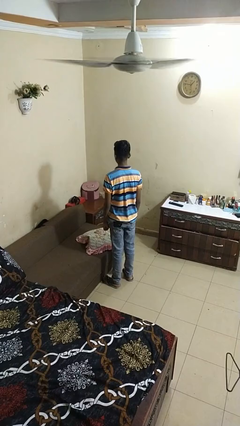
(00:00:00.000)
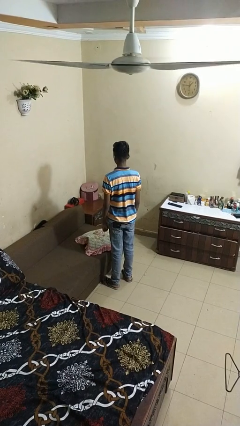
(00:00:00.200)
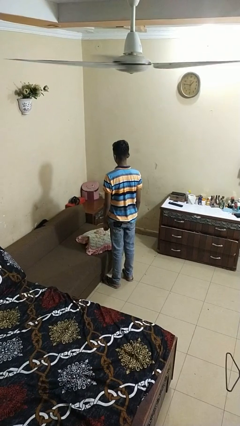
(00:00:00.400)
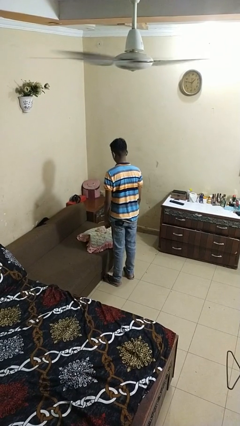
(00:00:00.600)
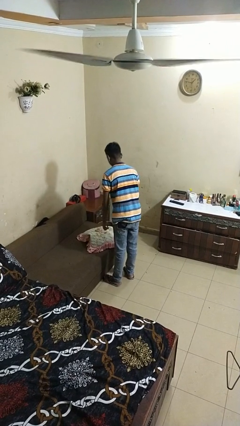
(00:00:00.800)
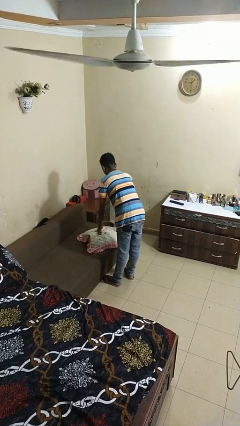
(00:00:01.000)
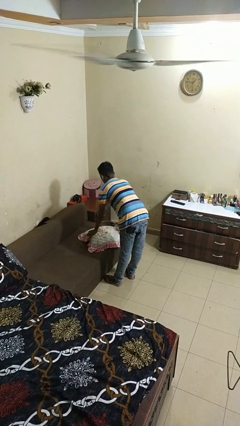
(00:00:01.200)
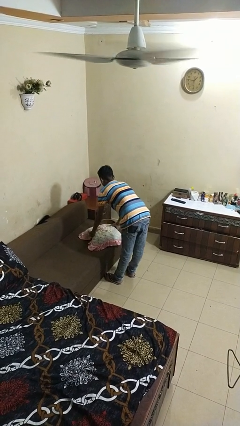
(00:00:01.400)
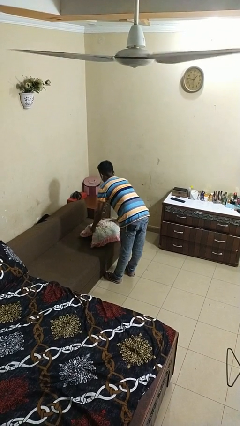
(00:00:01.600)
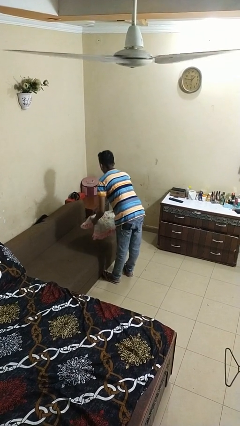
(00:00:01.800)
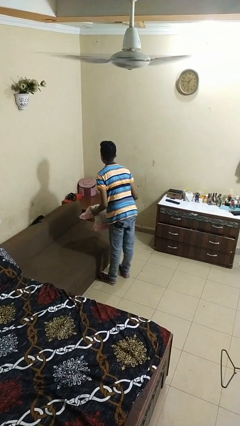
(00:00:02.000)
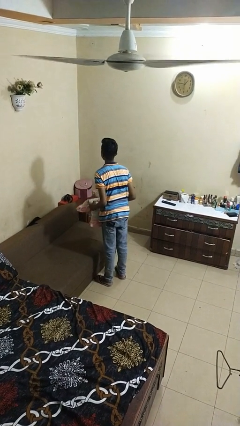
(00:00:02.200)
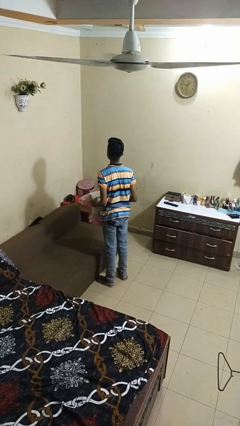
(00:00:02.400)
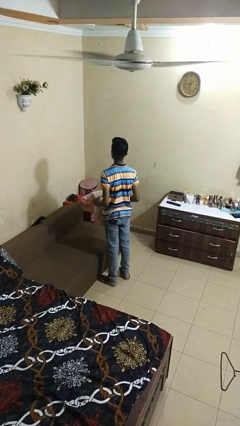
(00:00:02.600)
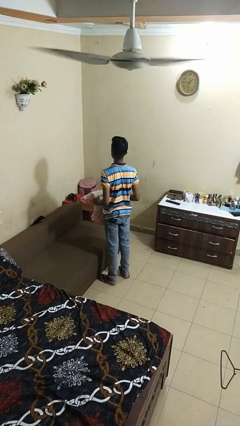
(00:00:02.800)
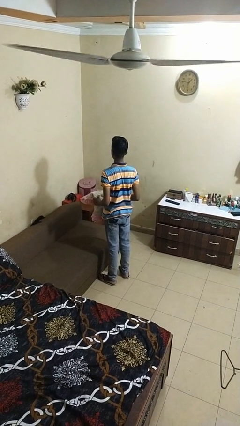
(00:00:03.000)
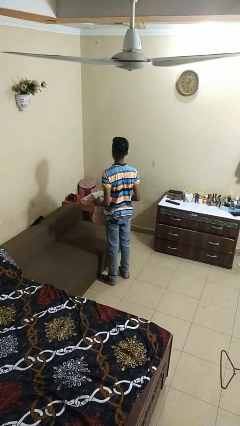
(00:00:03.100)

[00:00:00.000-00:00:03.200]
person picks up object from couch

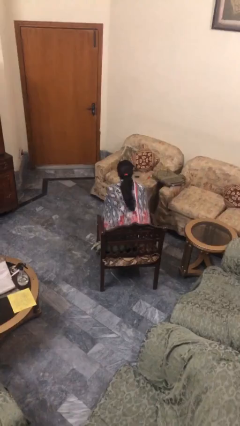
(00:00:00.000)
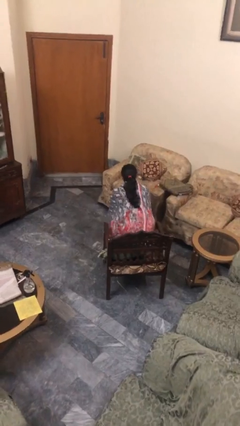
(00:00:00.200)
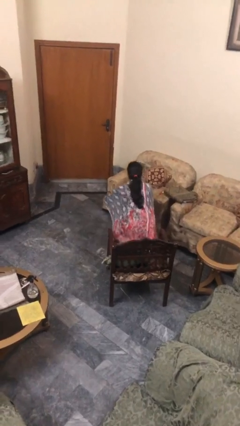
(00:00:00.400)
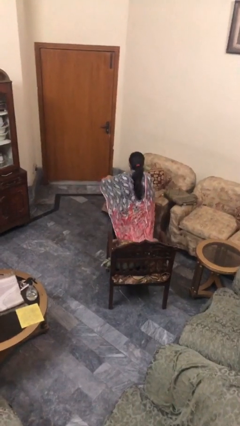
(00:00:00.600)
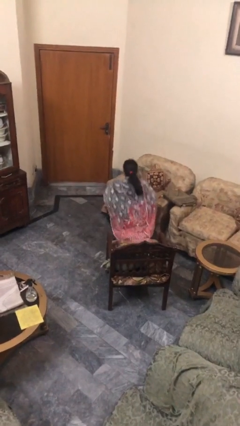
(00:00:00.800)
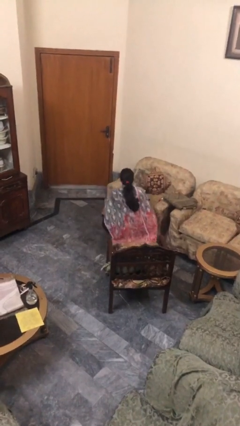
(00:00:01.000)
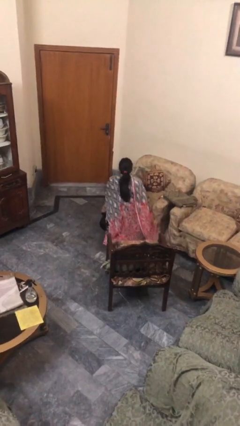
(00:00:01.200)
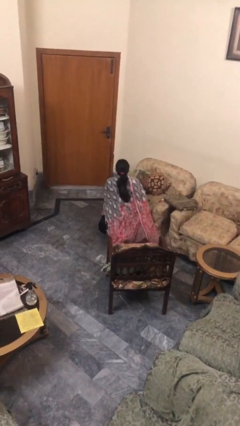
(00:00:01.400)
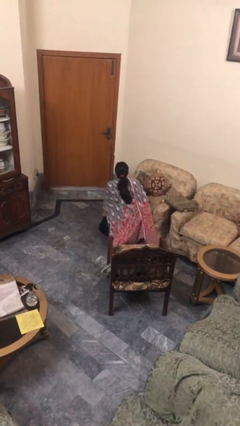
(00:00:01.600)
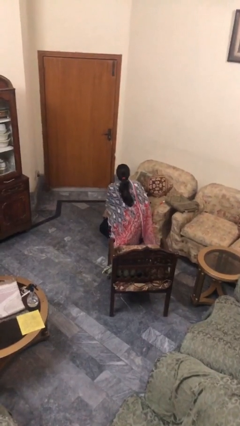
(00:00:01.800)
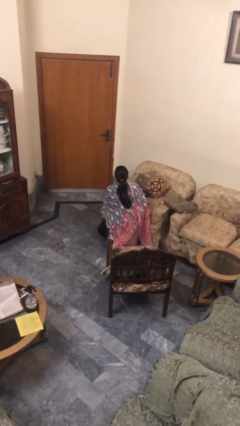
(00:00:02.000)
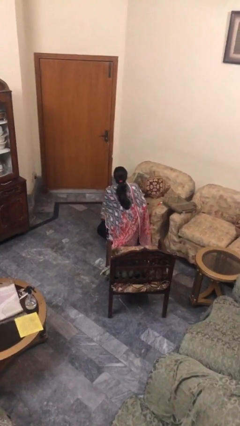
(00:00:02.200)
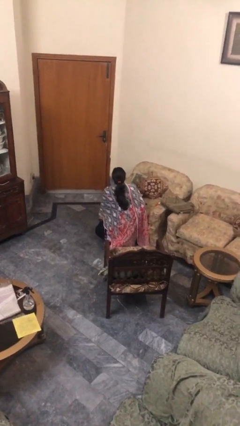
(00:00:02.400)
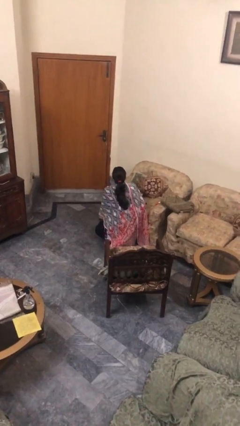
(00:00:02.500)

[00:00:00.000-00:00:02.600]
person falls from chair

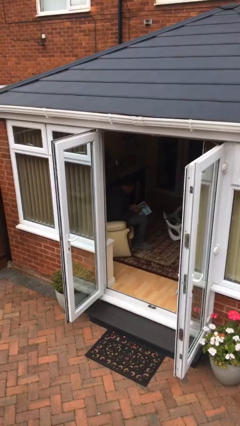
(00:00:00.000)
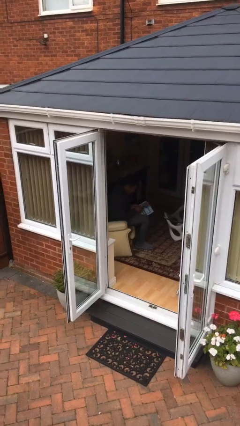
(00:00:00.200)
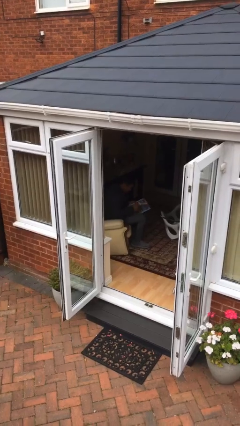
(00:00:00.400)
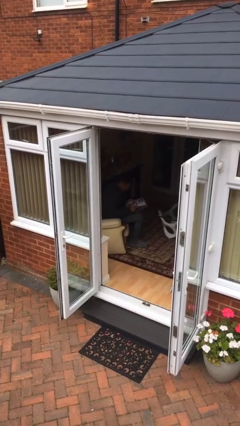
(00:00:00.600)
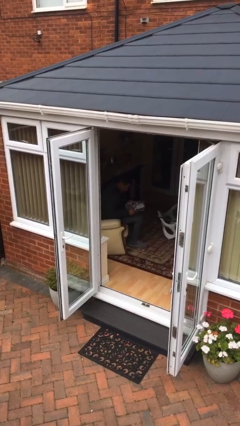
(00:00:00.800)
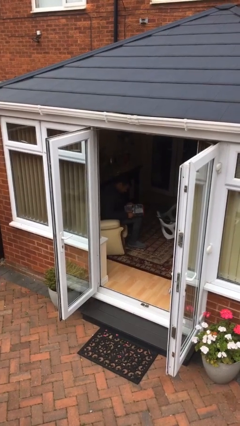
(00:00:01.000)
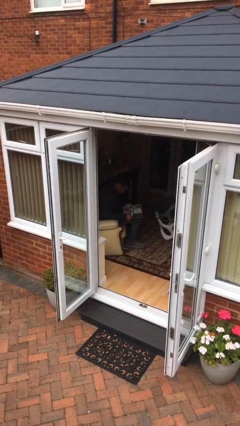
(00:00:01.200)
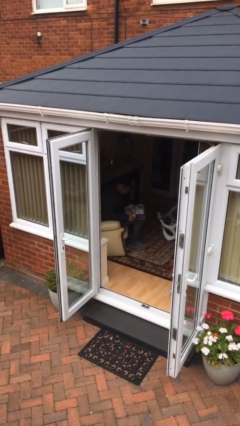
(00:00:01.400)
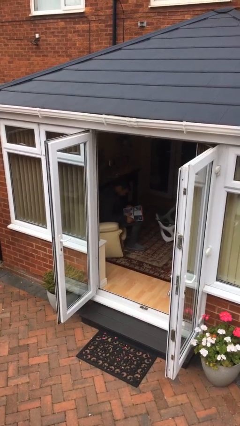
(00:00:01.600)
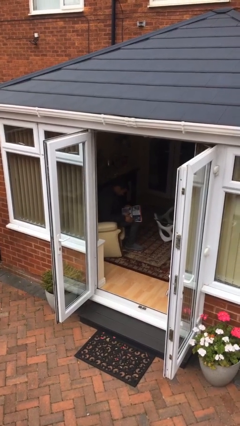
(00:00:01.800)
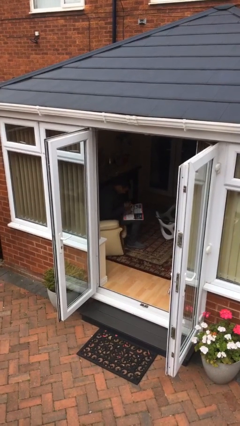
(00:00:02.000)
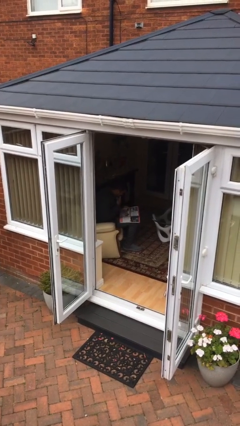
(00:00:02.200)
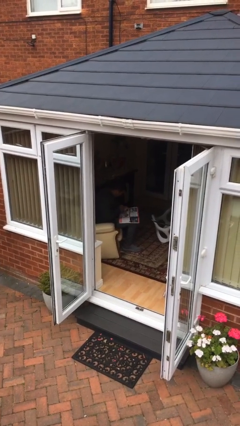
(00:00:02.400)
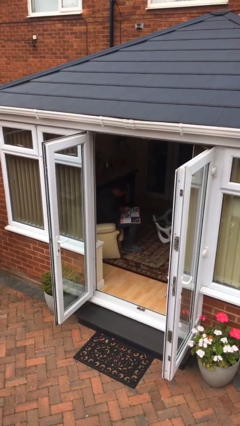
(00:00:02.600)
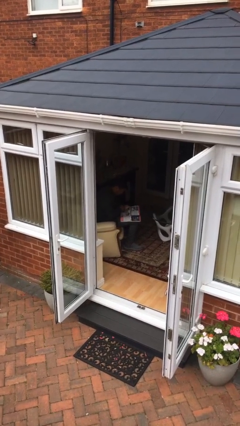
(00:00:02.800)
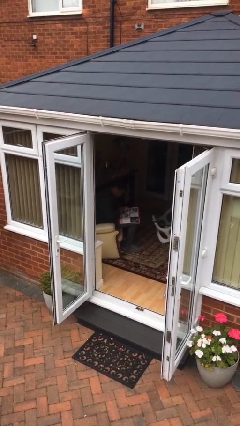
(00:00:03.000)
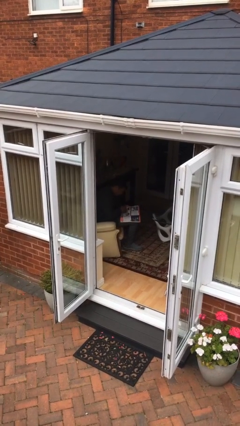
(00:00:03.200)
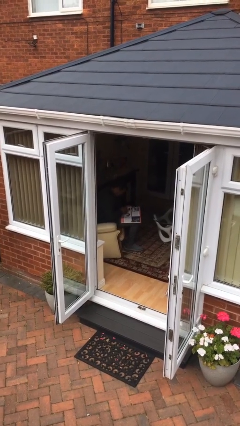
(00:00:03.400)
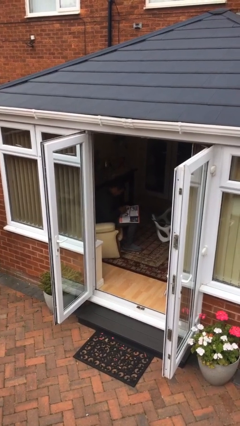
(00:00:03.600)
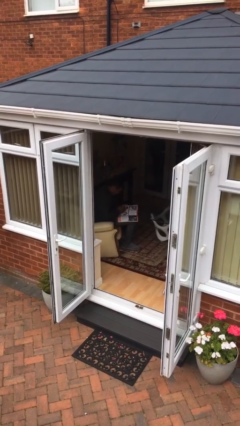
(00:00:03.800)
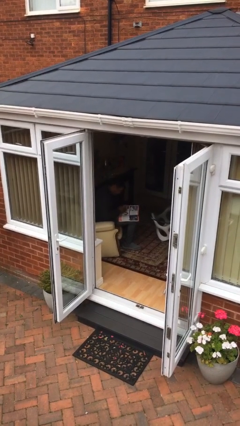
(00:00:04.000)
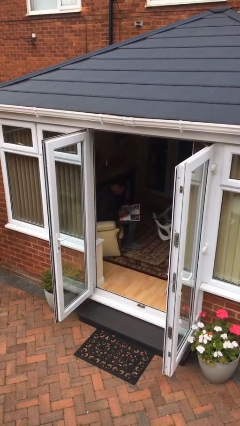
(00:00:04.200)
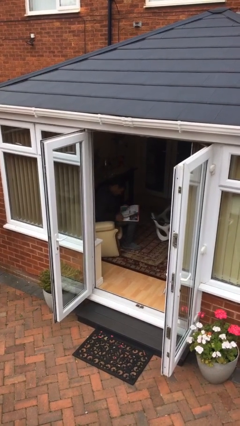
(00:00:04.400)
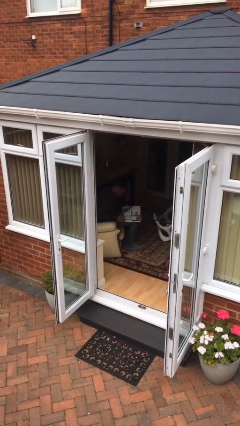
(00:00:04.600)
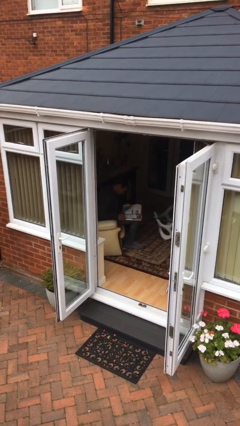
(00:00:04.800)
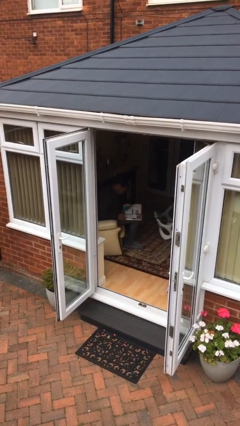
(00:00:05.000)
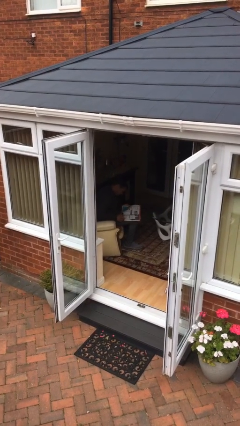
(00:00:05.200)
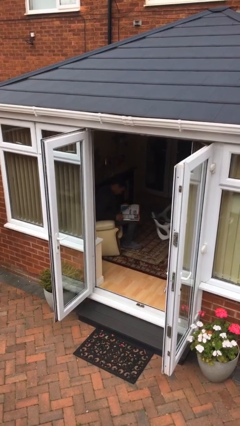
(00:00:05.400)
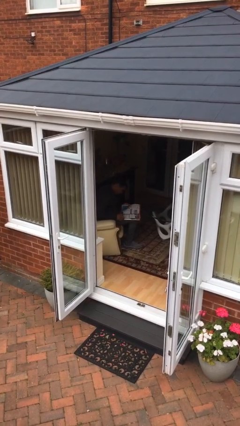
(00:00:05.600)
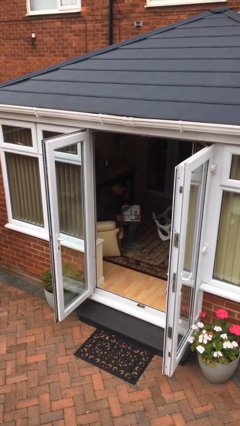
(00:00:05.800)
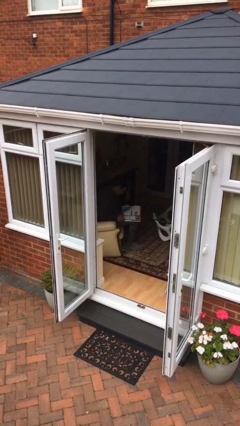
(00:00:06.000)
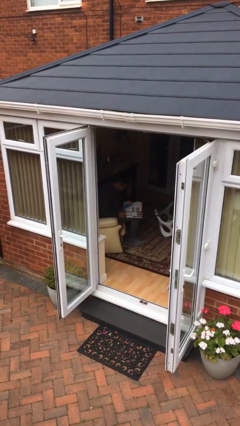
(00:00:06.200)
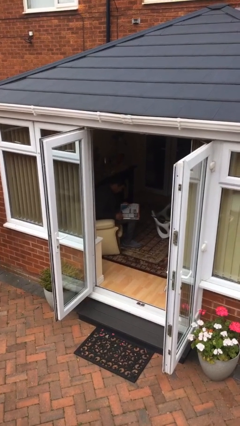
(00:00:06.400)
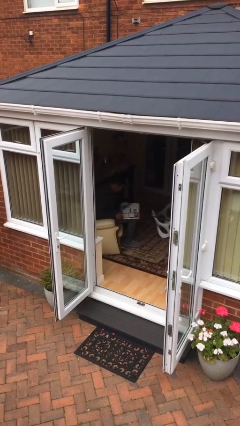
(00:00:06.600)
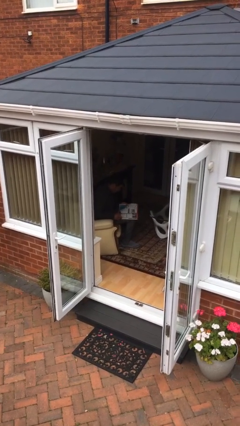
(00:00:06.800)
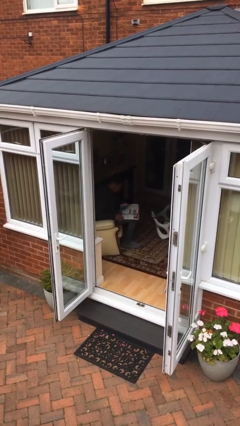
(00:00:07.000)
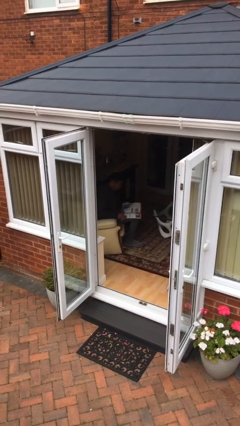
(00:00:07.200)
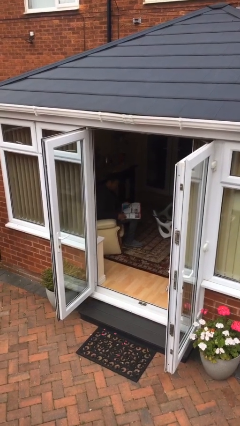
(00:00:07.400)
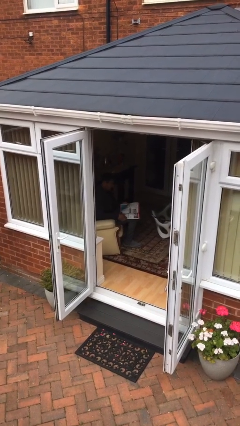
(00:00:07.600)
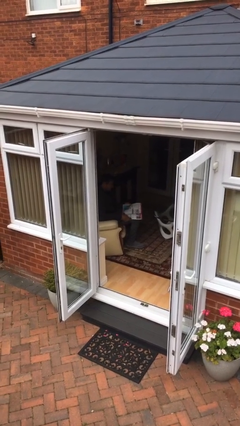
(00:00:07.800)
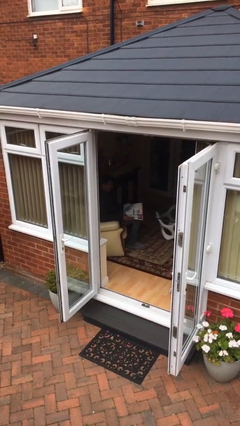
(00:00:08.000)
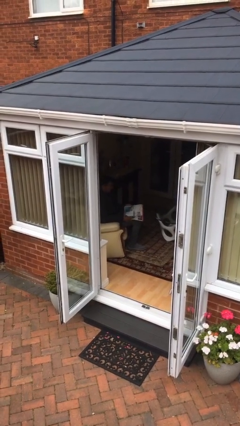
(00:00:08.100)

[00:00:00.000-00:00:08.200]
person reads document

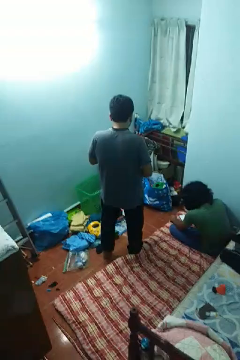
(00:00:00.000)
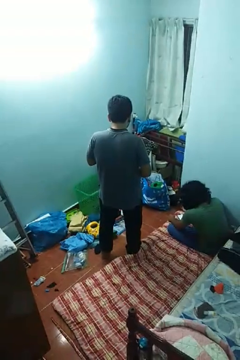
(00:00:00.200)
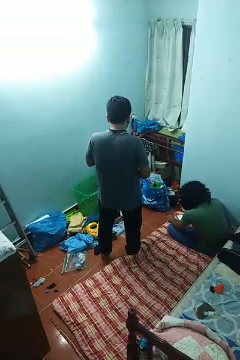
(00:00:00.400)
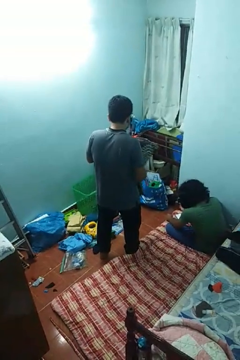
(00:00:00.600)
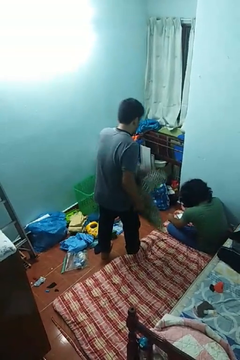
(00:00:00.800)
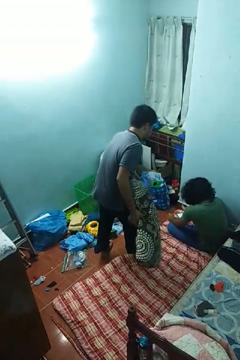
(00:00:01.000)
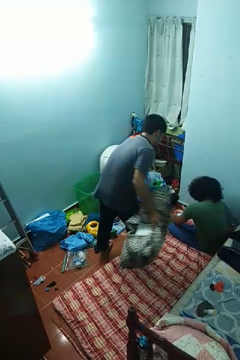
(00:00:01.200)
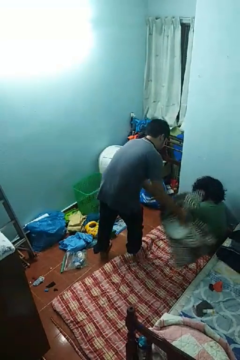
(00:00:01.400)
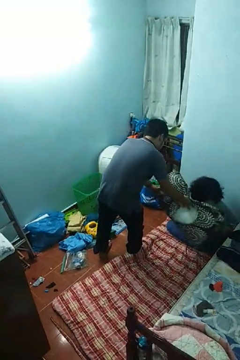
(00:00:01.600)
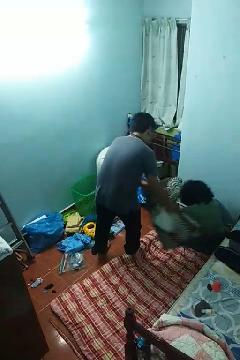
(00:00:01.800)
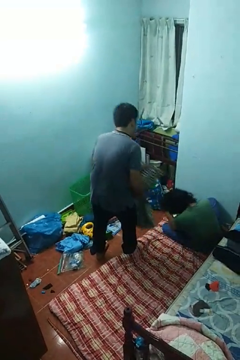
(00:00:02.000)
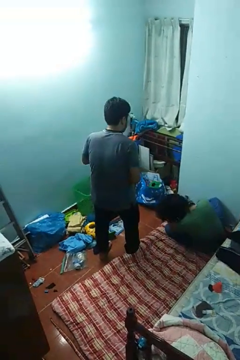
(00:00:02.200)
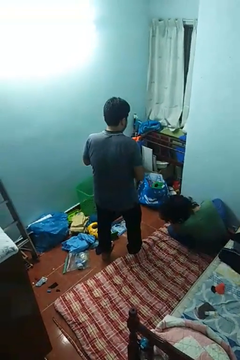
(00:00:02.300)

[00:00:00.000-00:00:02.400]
person hits person with pillow

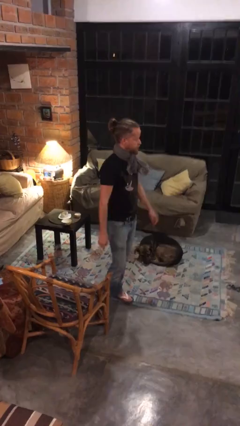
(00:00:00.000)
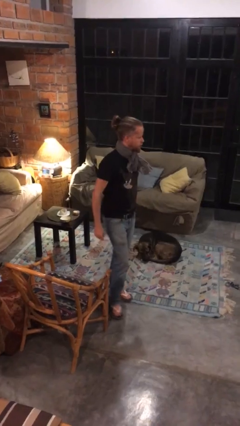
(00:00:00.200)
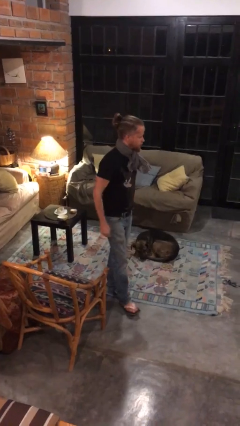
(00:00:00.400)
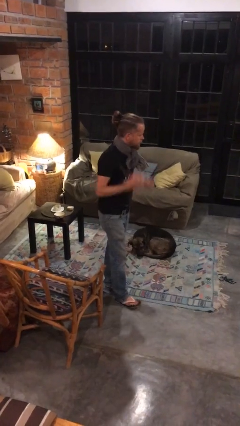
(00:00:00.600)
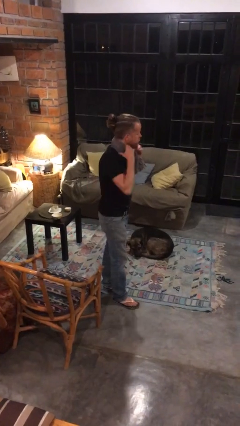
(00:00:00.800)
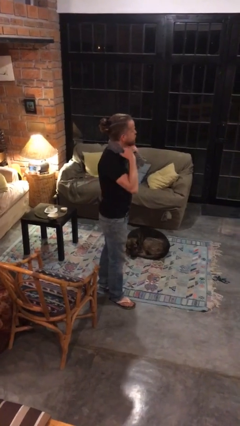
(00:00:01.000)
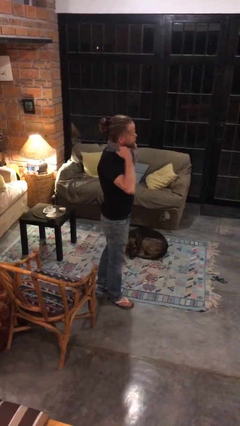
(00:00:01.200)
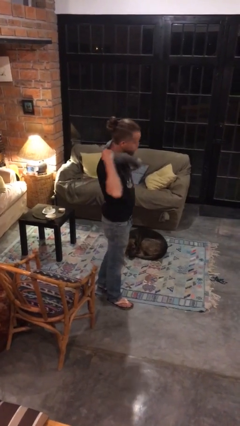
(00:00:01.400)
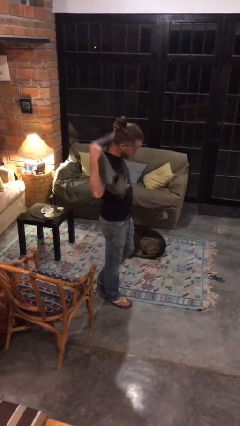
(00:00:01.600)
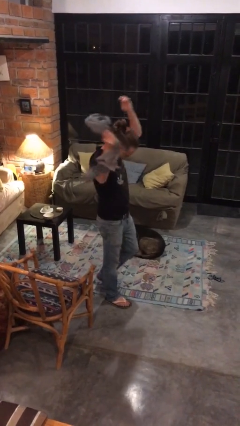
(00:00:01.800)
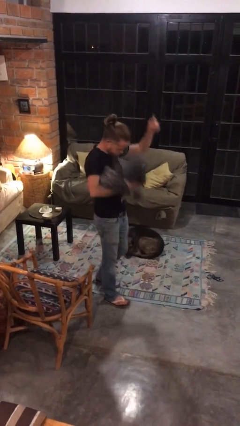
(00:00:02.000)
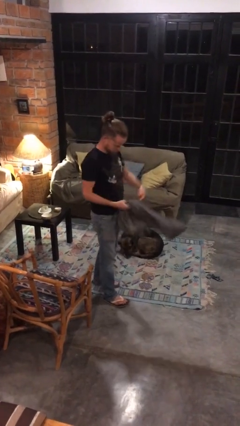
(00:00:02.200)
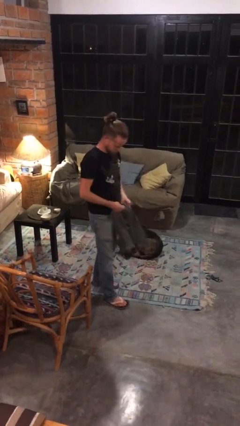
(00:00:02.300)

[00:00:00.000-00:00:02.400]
person takes off scarf
